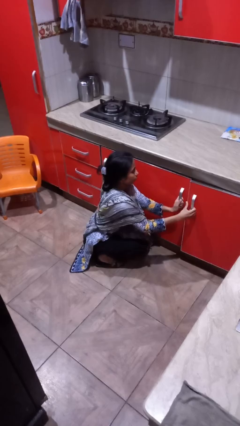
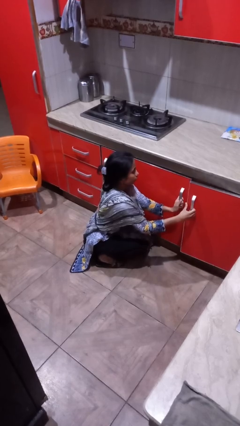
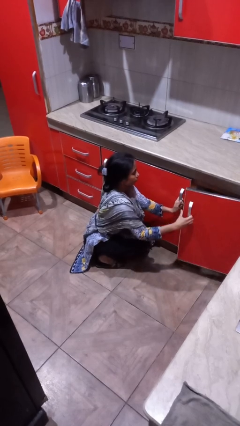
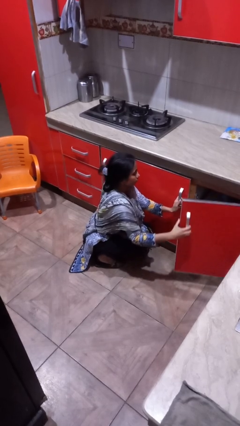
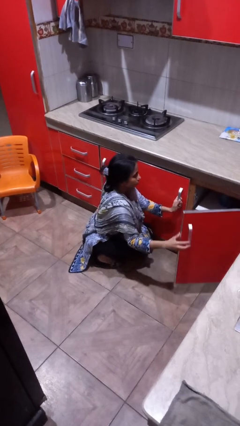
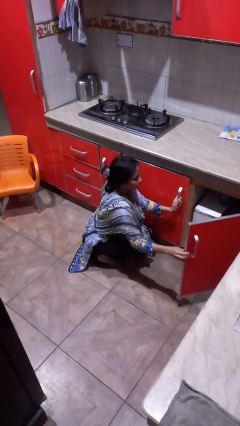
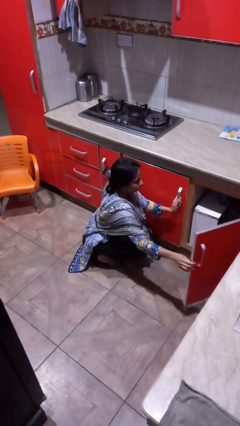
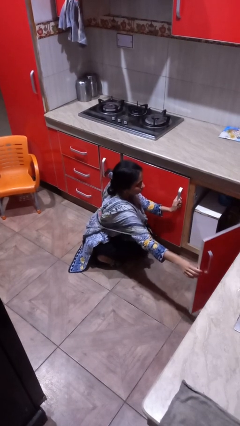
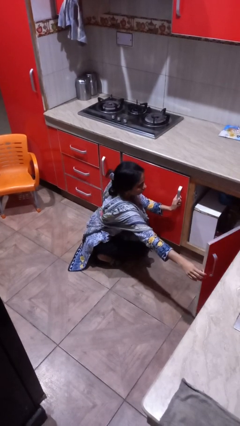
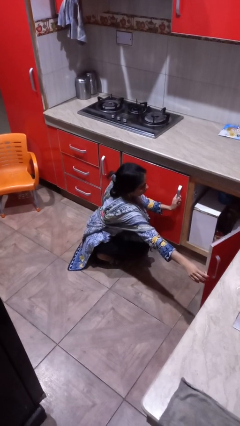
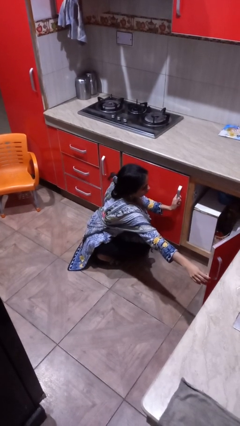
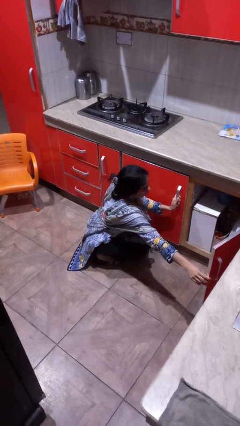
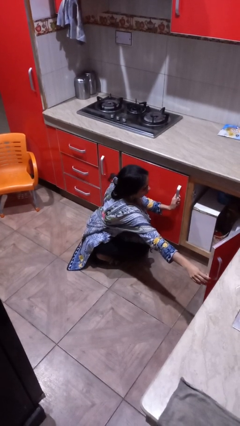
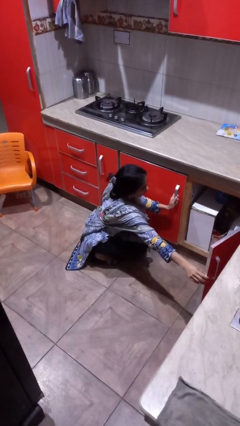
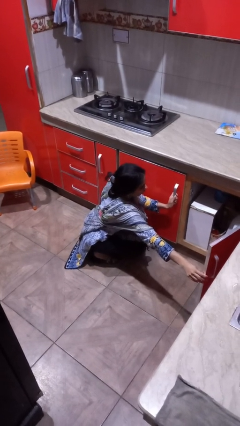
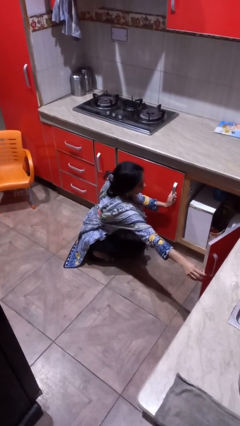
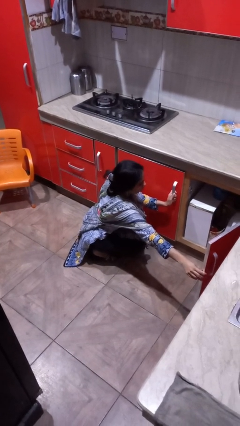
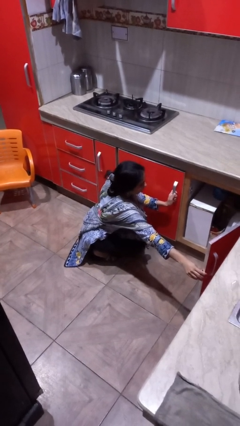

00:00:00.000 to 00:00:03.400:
person opens cabinet

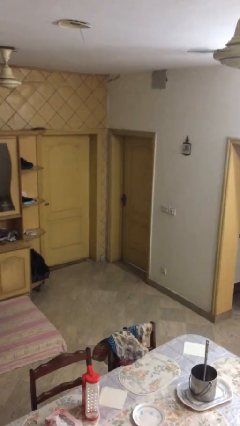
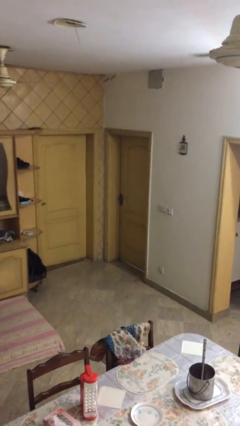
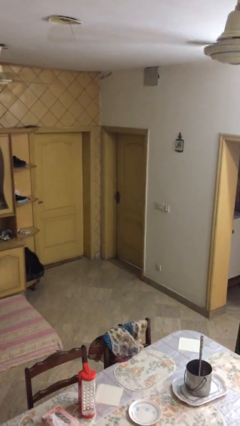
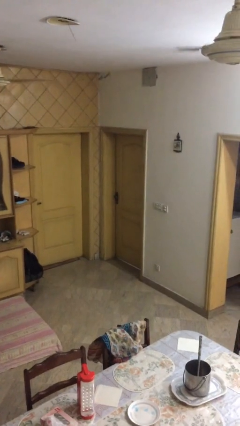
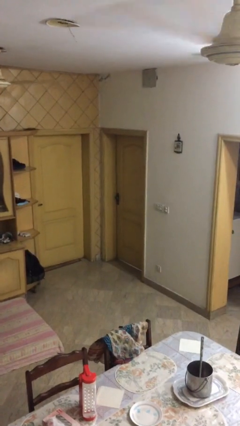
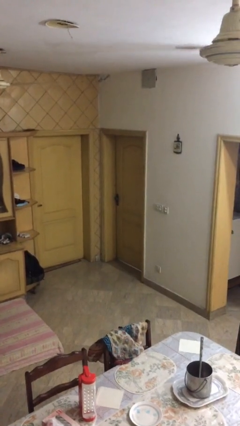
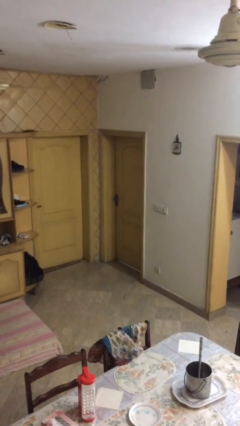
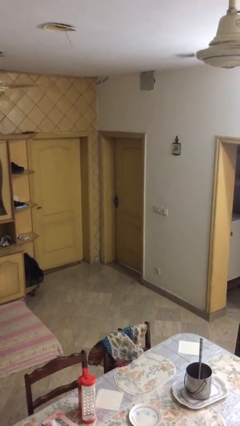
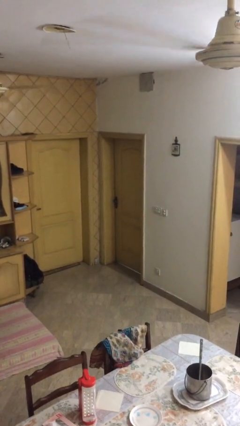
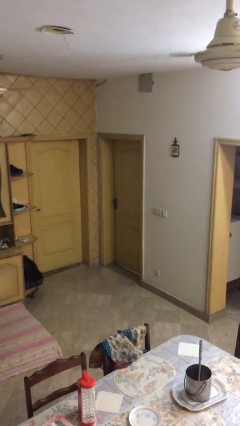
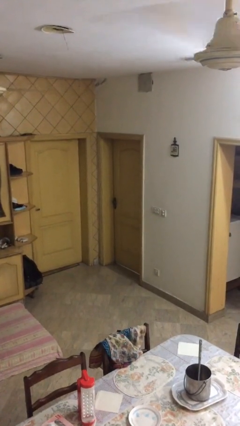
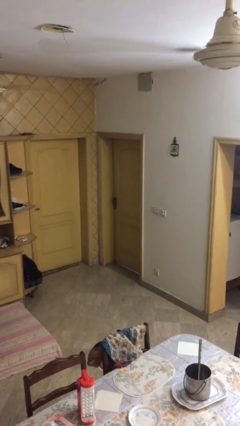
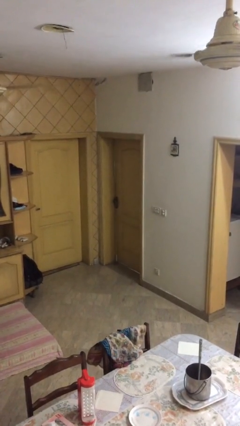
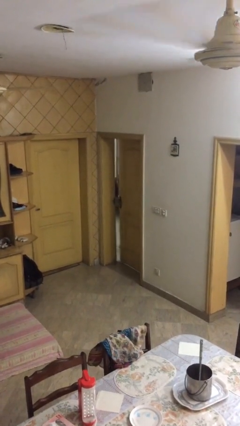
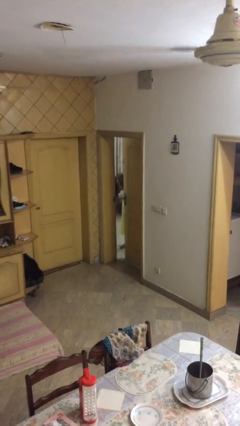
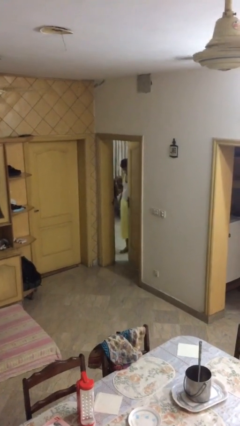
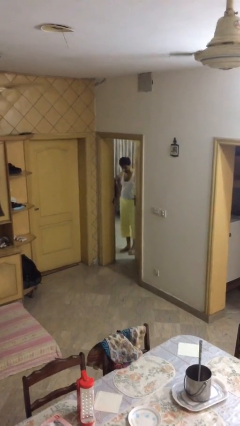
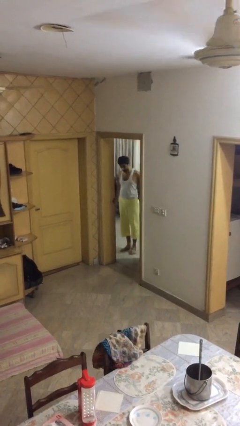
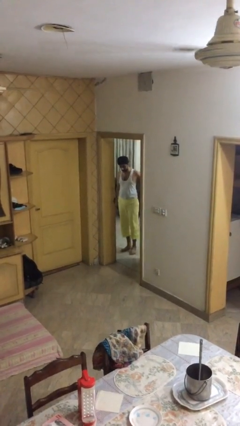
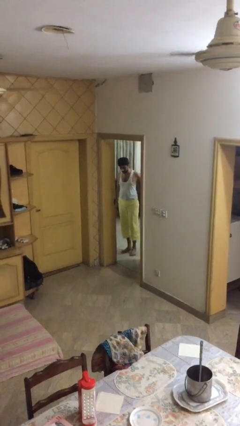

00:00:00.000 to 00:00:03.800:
person opens facility door

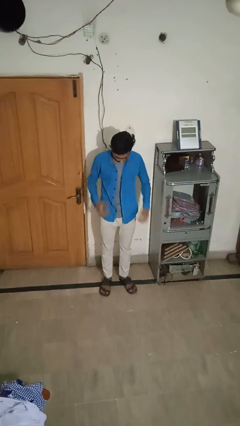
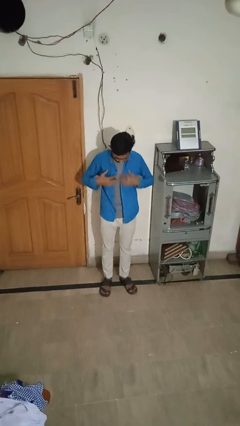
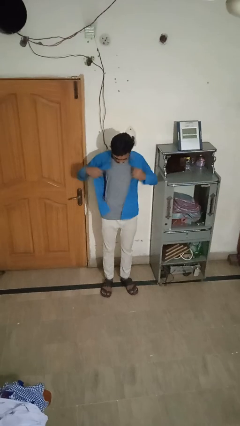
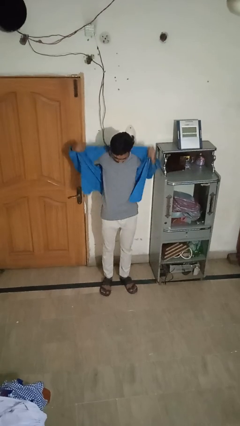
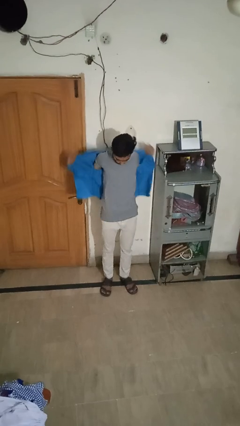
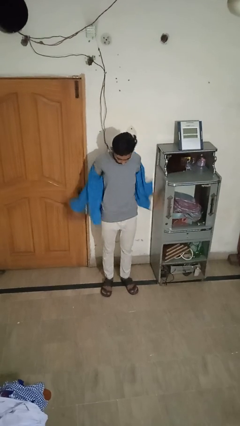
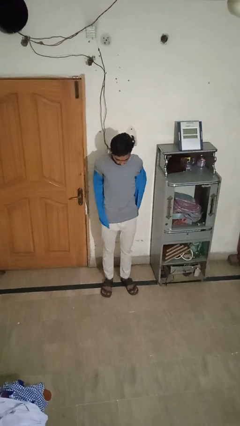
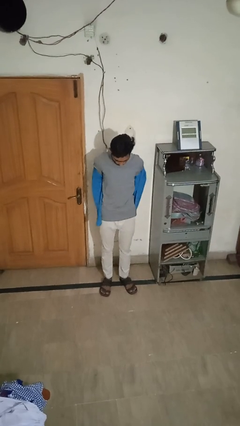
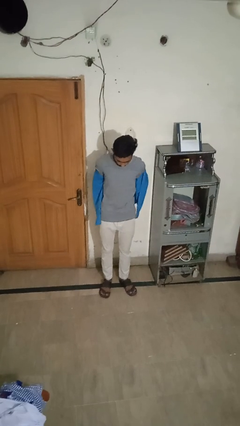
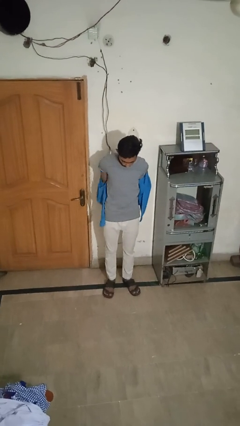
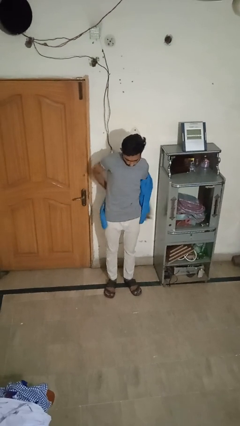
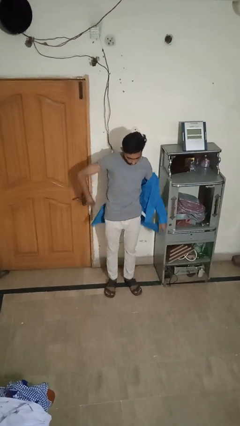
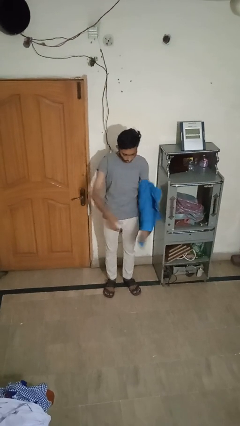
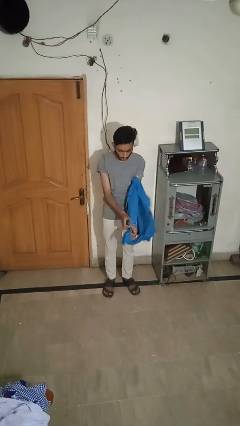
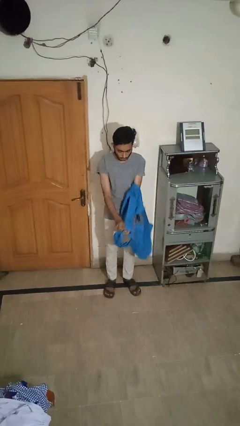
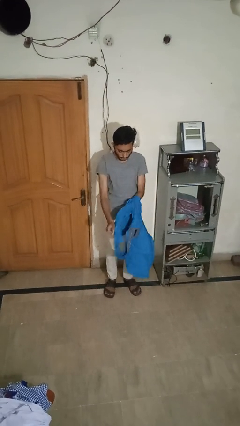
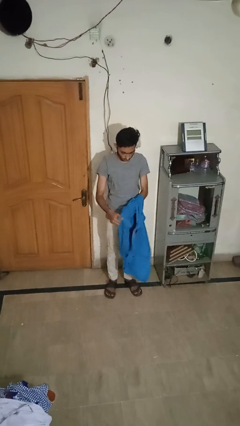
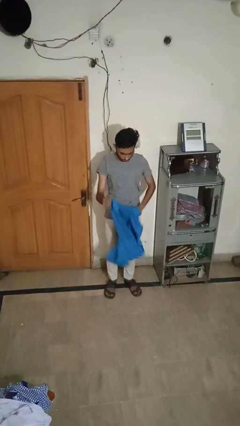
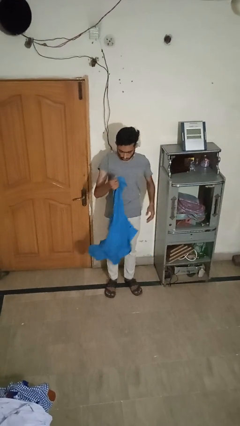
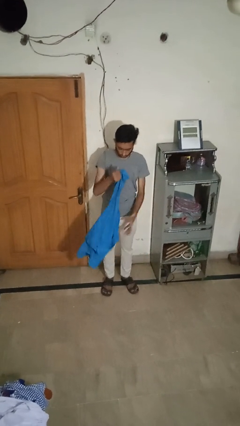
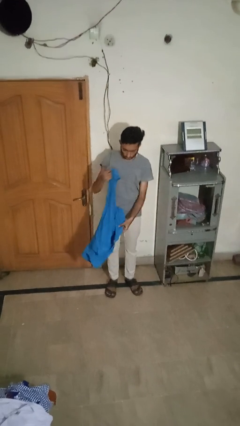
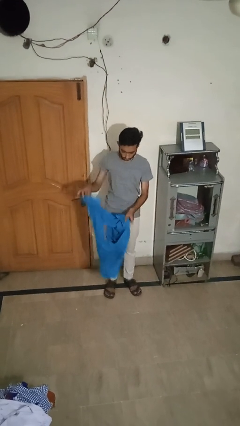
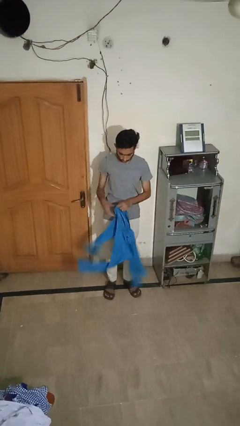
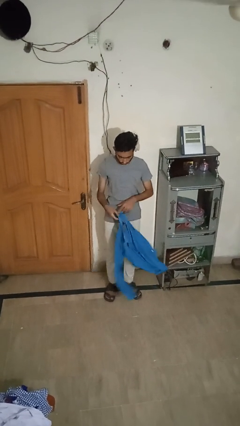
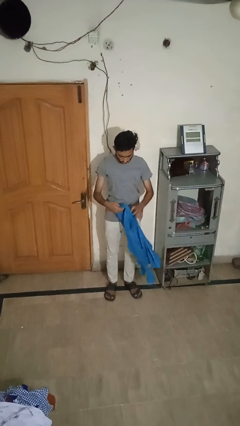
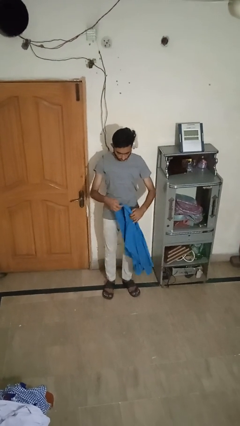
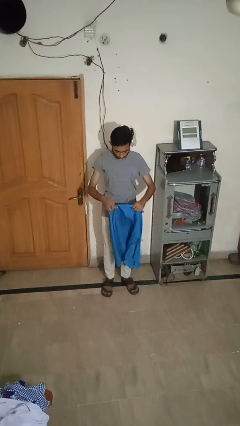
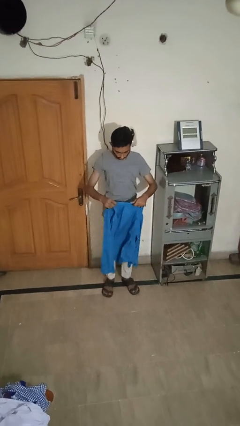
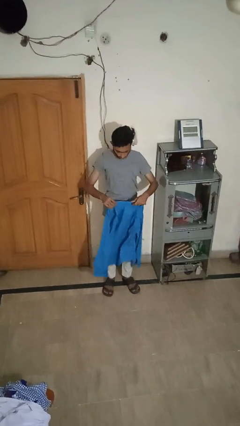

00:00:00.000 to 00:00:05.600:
person takes off shirt

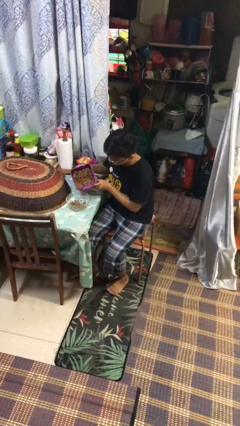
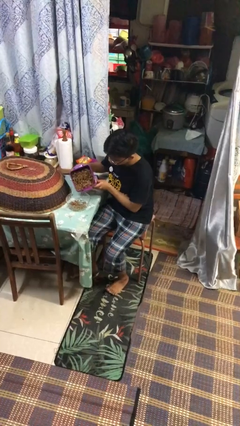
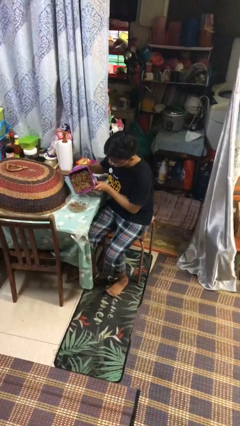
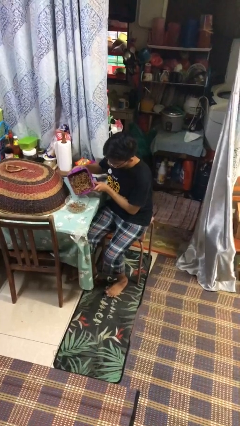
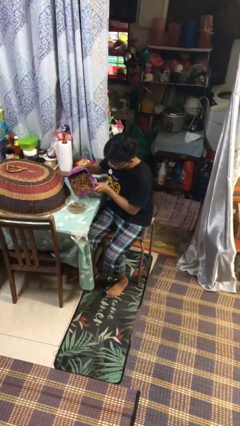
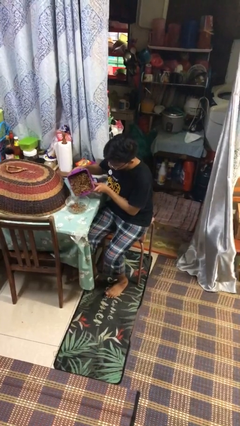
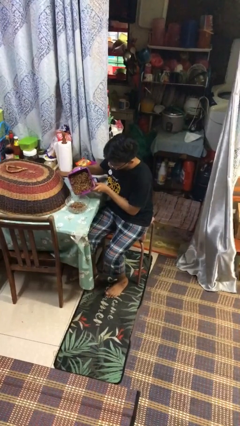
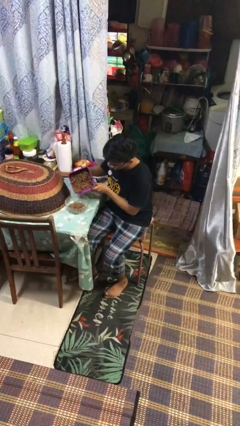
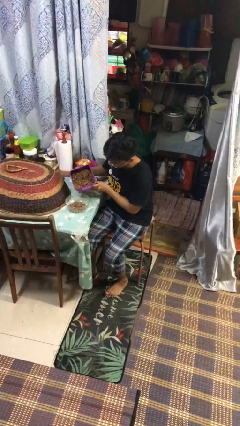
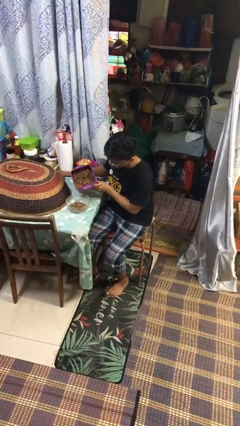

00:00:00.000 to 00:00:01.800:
person pours into bowl

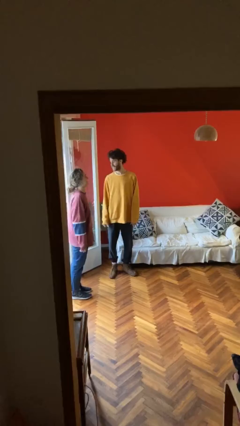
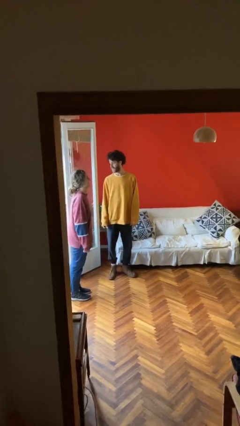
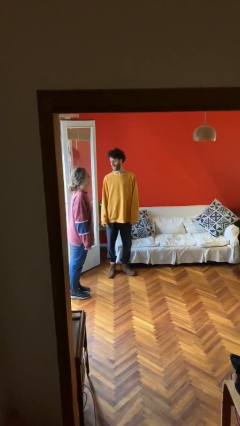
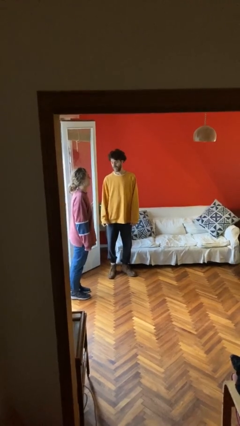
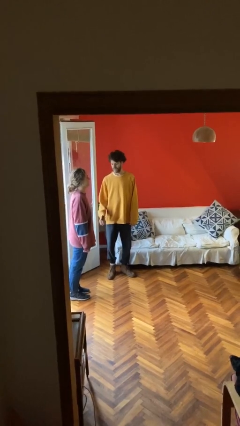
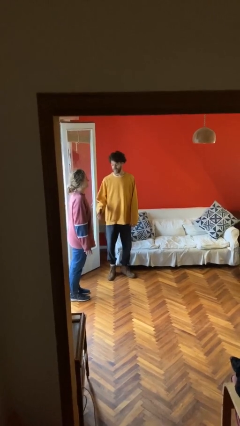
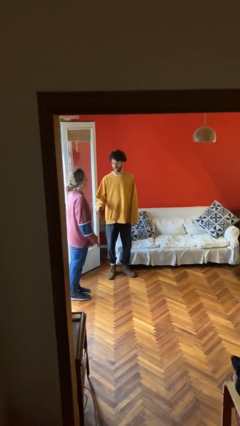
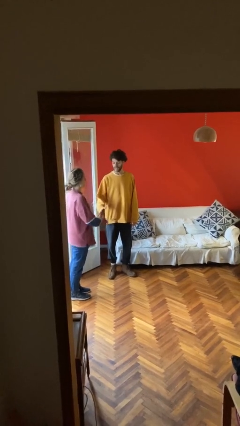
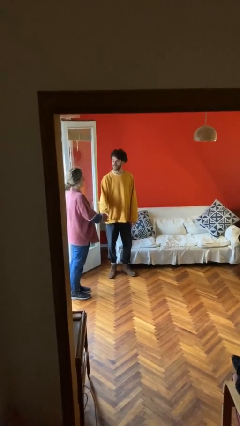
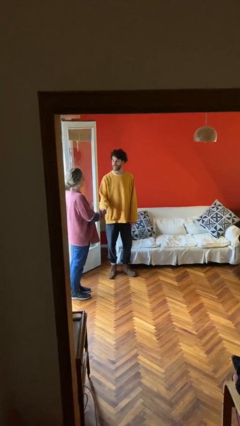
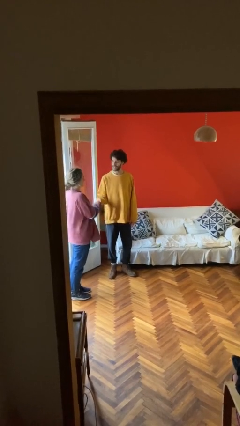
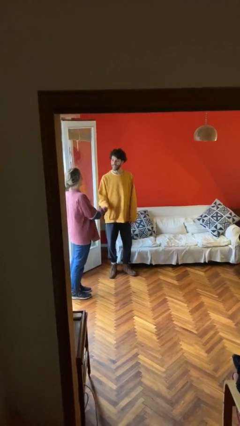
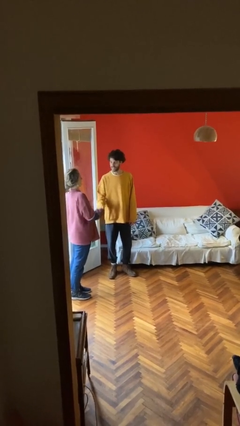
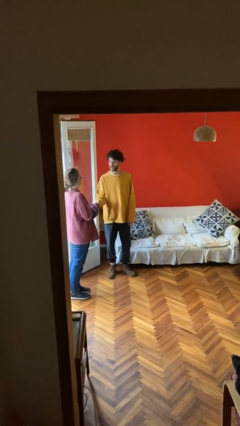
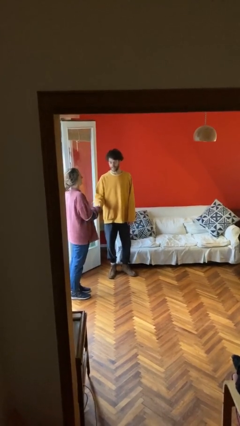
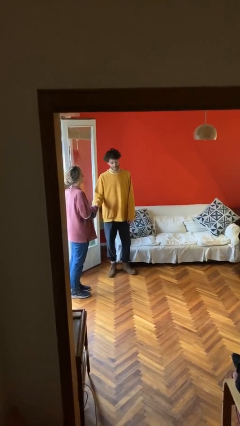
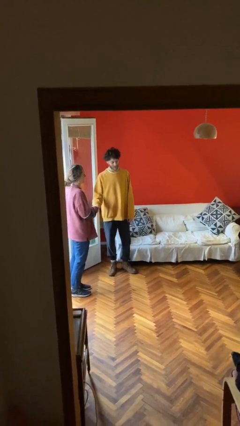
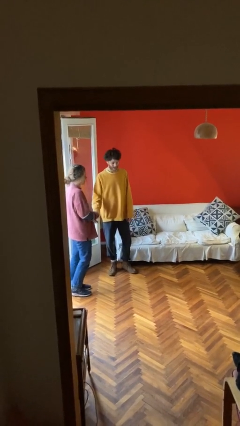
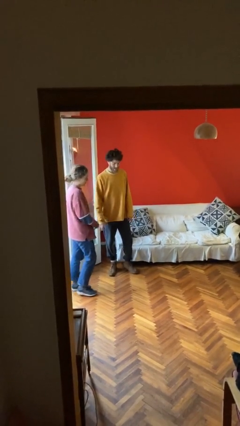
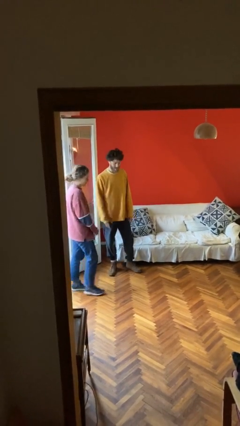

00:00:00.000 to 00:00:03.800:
person shakes hand
